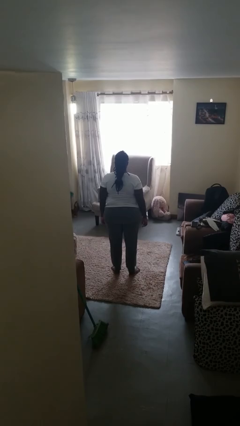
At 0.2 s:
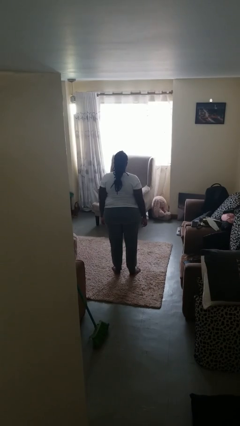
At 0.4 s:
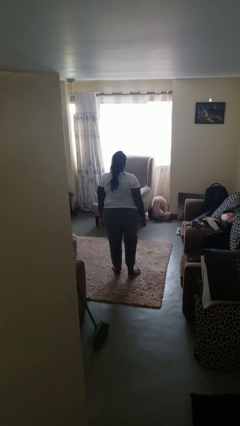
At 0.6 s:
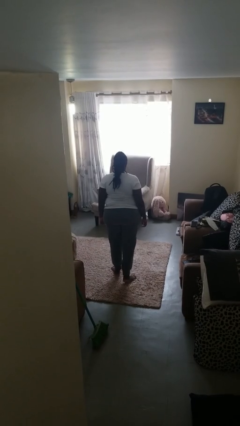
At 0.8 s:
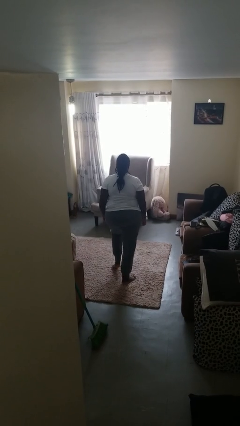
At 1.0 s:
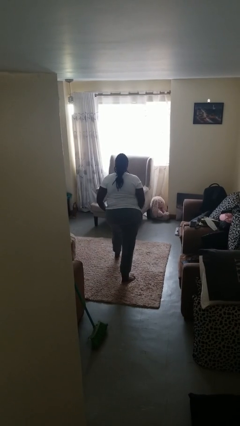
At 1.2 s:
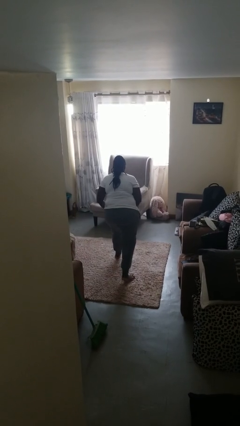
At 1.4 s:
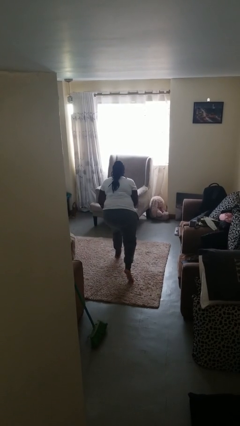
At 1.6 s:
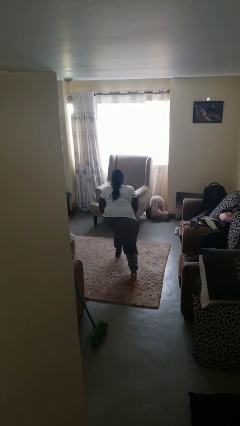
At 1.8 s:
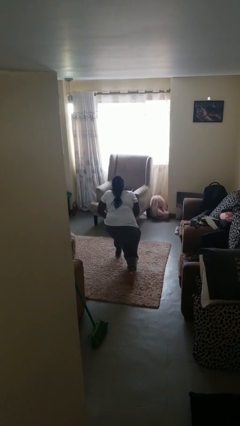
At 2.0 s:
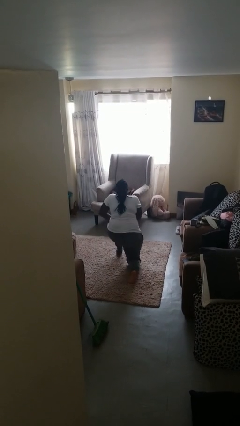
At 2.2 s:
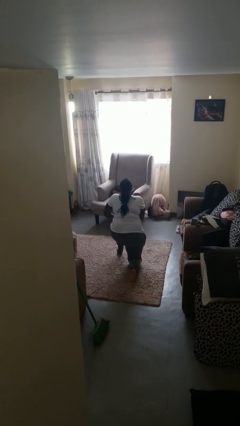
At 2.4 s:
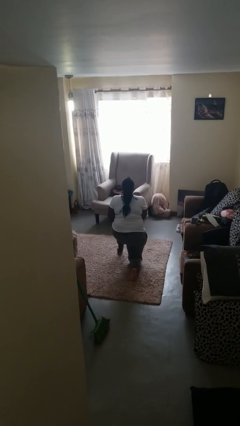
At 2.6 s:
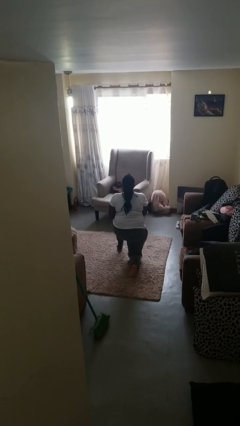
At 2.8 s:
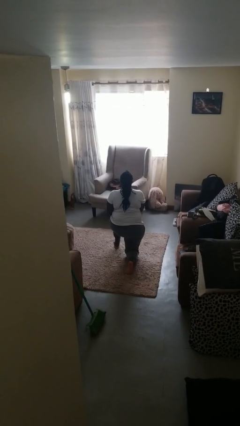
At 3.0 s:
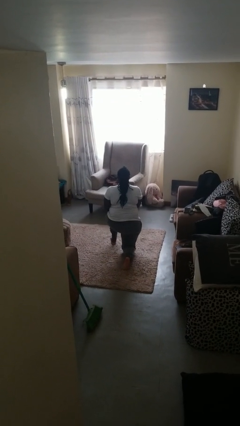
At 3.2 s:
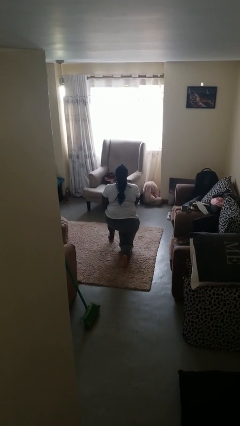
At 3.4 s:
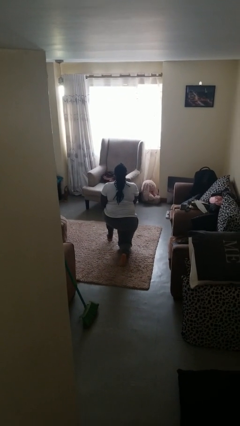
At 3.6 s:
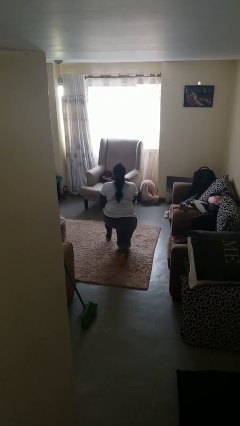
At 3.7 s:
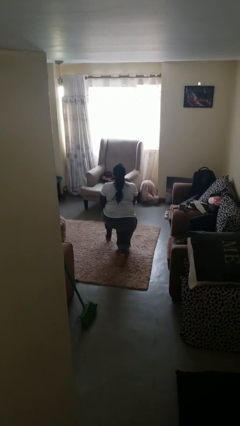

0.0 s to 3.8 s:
person kneels

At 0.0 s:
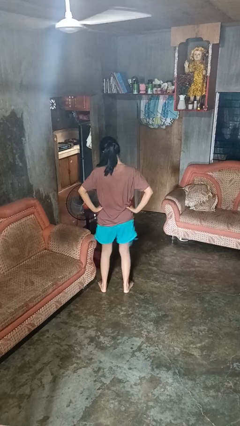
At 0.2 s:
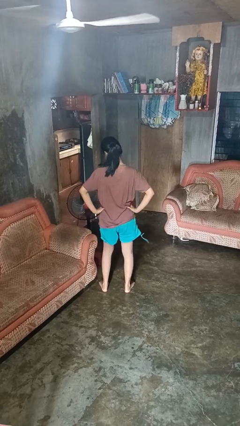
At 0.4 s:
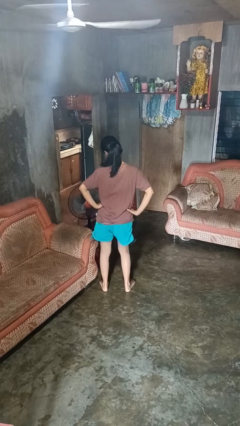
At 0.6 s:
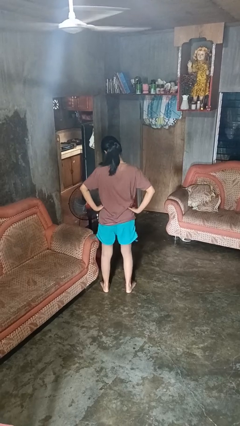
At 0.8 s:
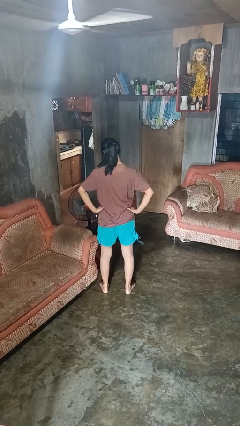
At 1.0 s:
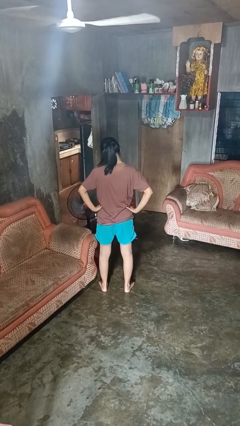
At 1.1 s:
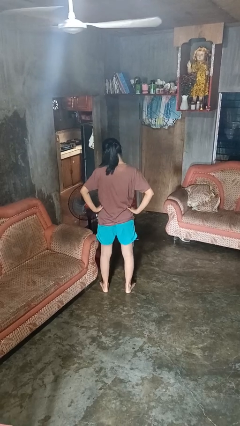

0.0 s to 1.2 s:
person wiggles hips

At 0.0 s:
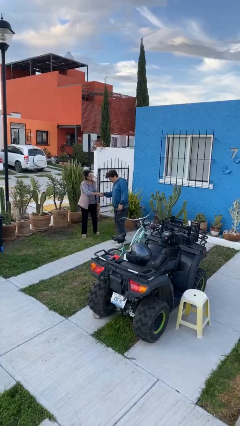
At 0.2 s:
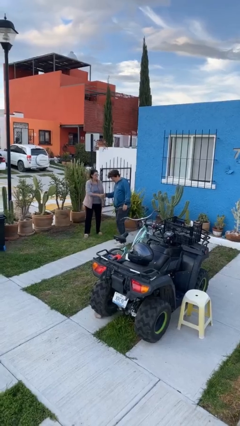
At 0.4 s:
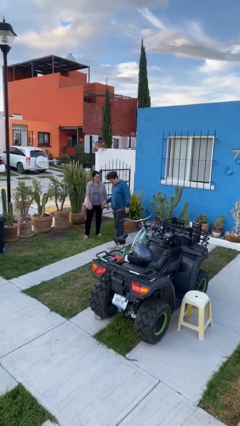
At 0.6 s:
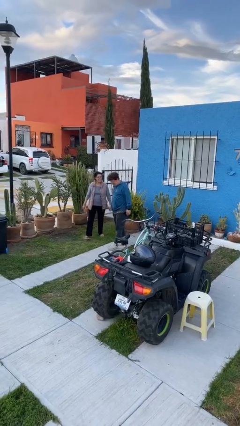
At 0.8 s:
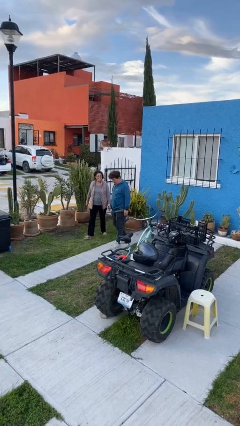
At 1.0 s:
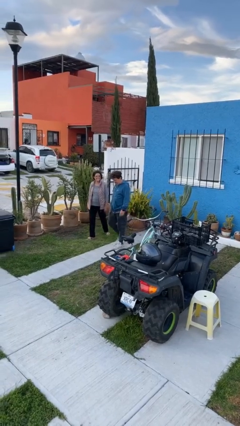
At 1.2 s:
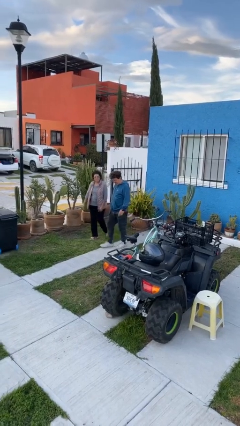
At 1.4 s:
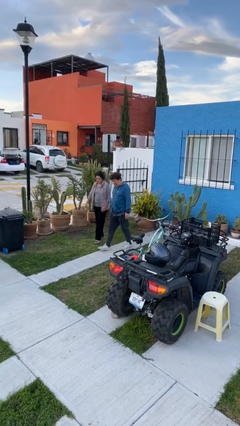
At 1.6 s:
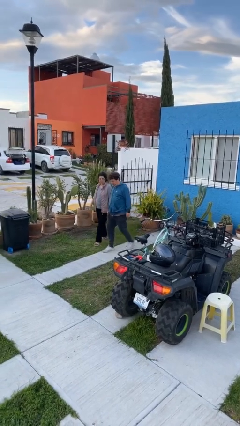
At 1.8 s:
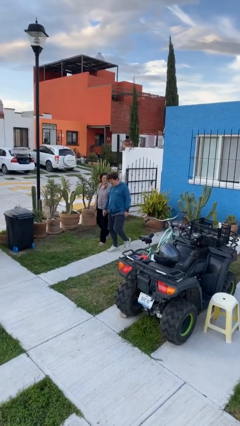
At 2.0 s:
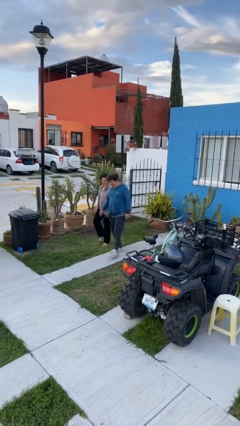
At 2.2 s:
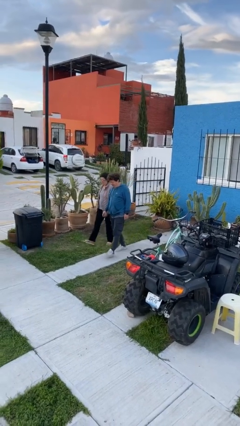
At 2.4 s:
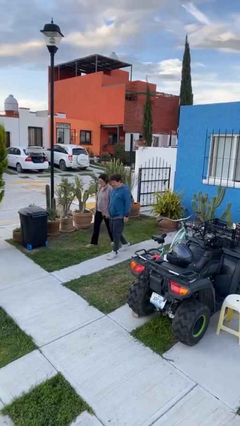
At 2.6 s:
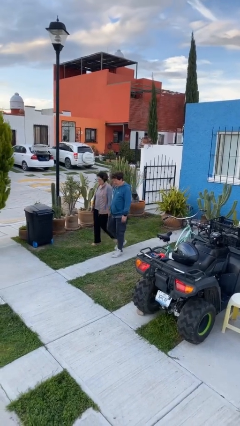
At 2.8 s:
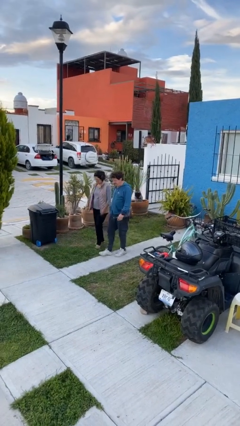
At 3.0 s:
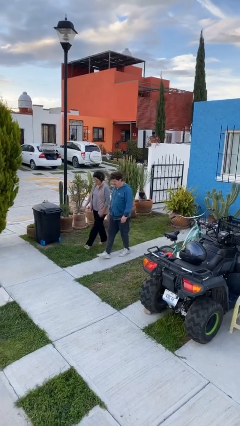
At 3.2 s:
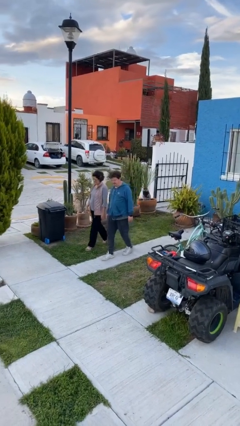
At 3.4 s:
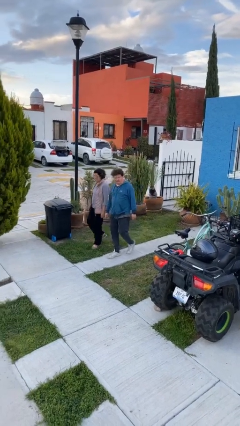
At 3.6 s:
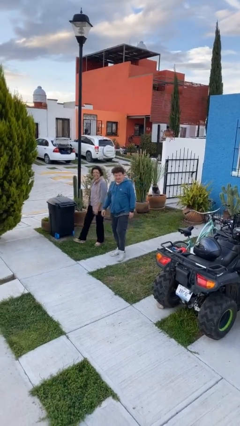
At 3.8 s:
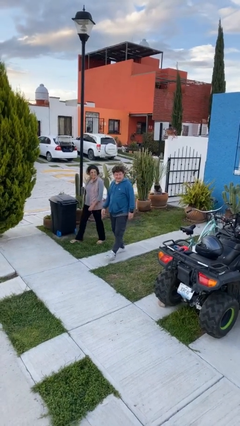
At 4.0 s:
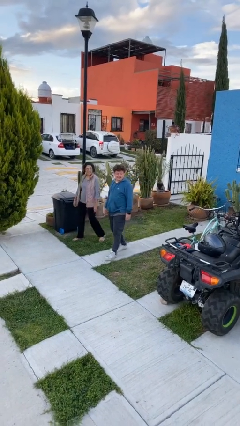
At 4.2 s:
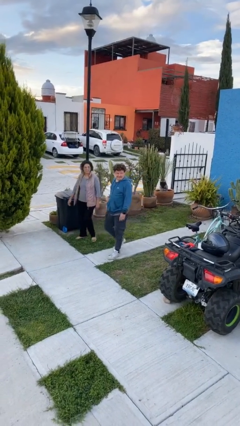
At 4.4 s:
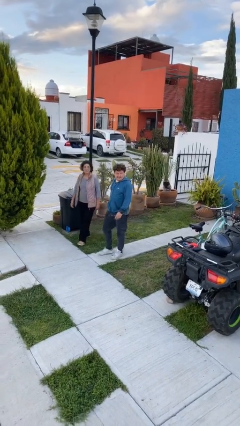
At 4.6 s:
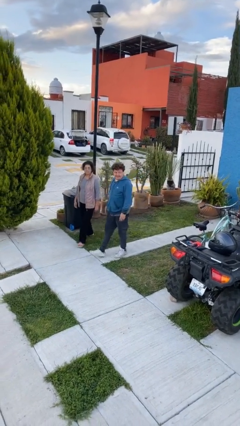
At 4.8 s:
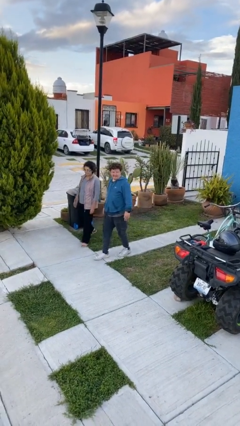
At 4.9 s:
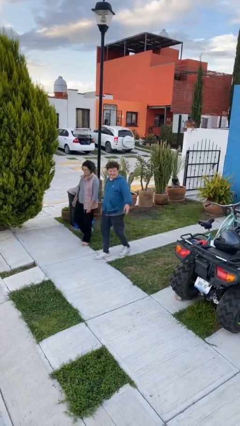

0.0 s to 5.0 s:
person talks to person

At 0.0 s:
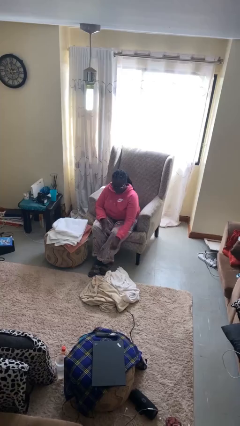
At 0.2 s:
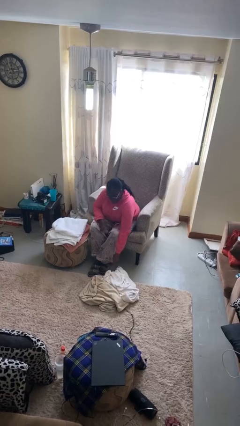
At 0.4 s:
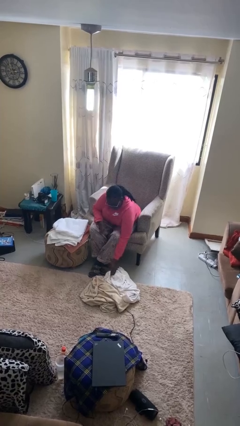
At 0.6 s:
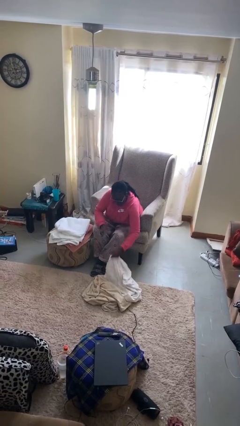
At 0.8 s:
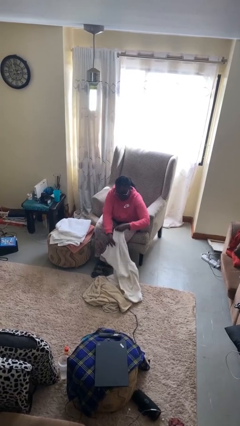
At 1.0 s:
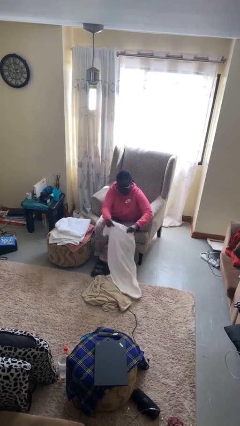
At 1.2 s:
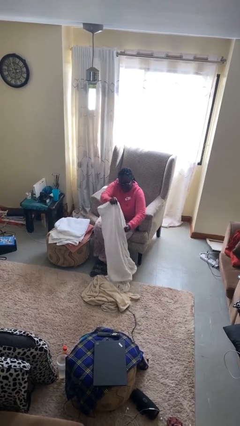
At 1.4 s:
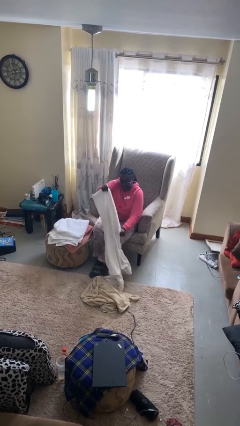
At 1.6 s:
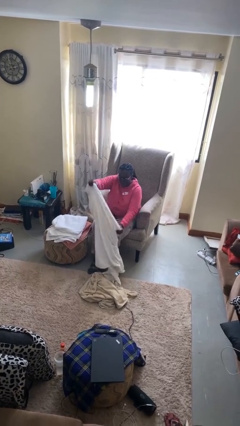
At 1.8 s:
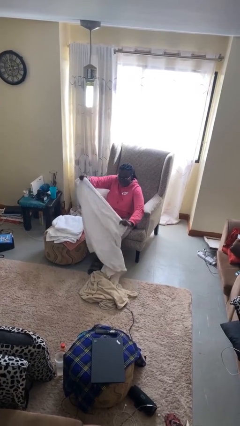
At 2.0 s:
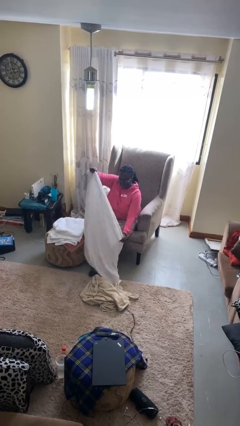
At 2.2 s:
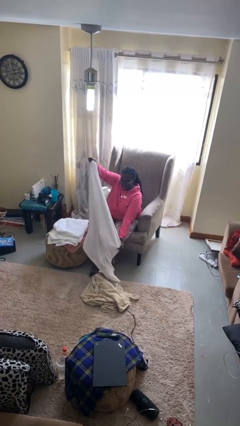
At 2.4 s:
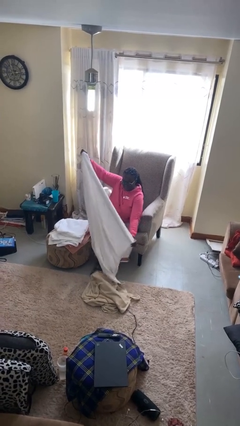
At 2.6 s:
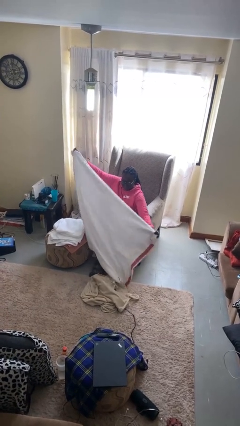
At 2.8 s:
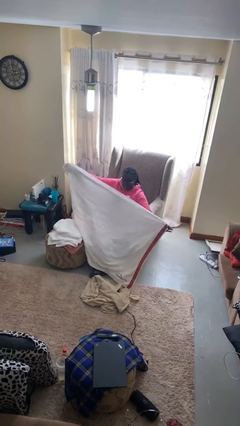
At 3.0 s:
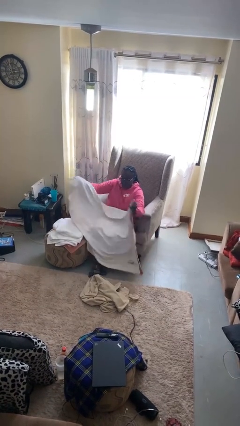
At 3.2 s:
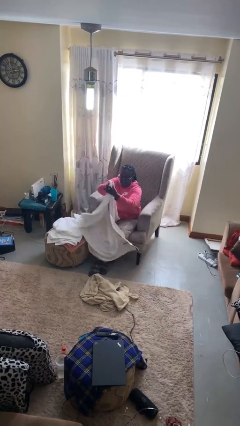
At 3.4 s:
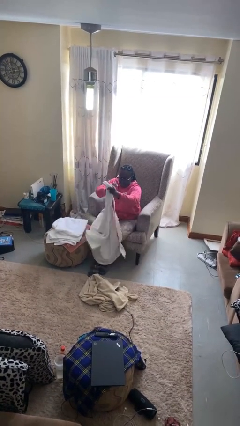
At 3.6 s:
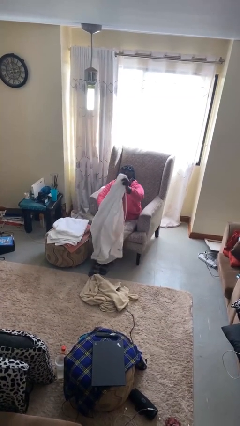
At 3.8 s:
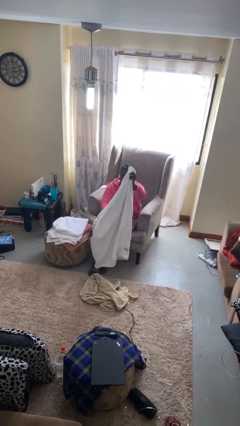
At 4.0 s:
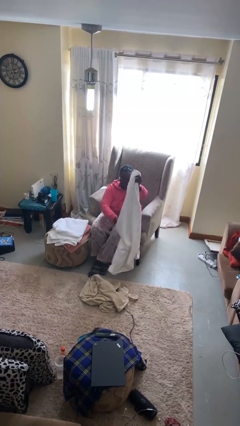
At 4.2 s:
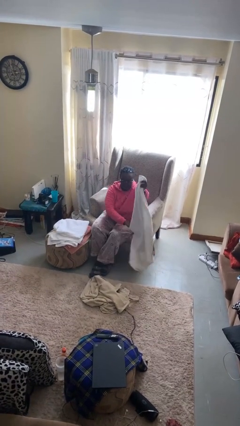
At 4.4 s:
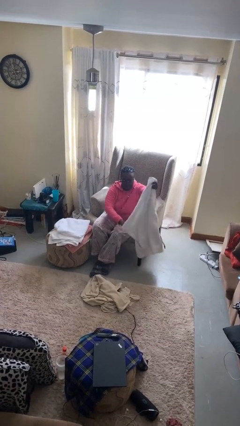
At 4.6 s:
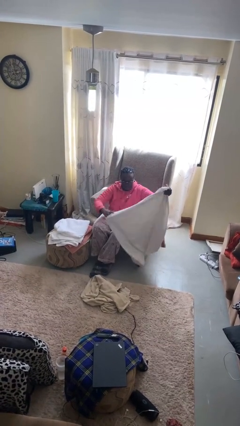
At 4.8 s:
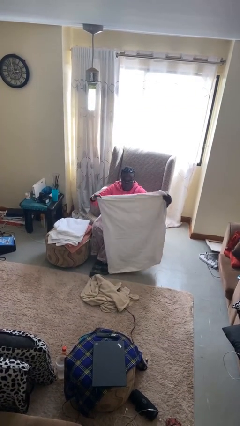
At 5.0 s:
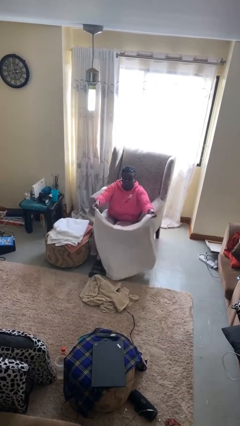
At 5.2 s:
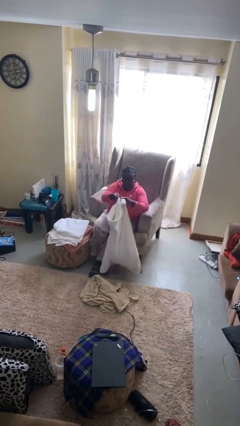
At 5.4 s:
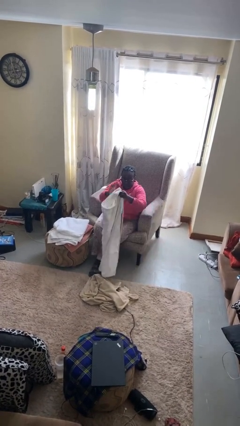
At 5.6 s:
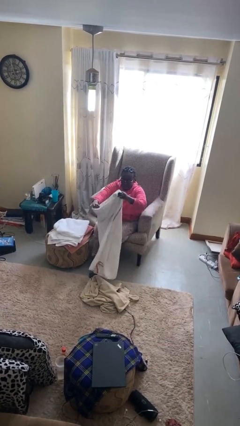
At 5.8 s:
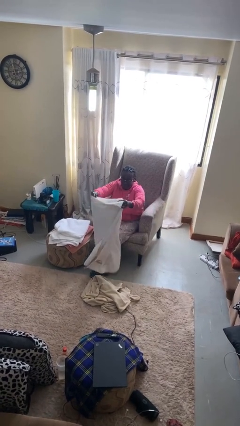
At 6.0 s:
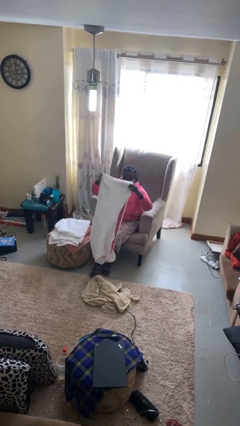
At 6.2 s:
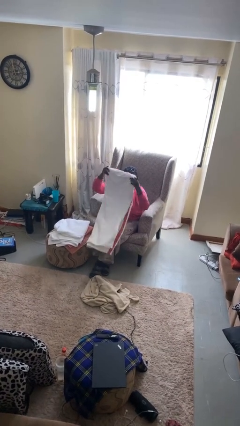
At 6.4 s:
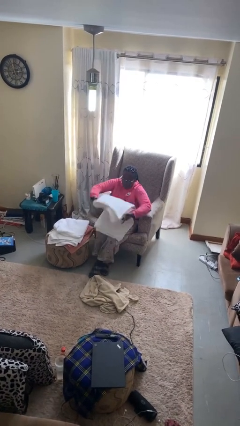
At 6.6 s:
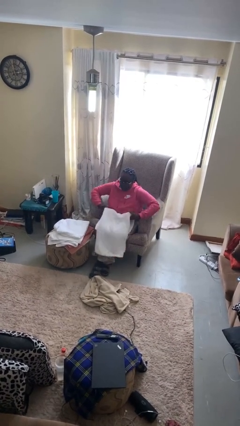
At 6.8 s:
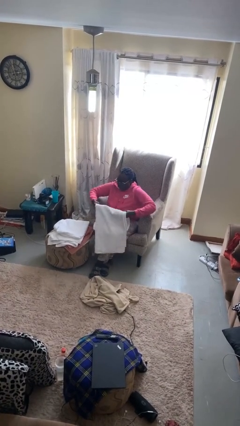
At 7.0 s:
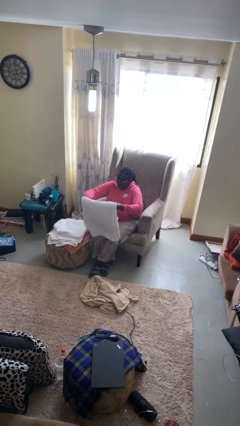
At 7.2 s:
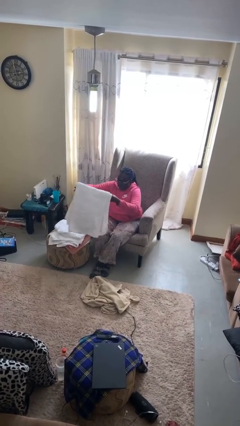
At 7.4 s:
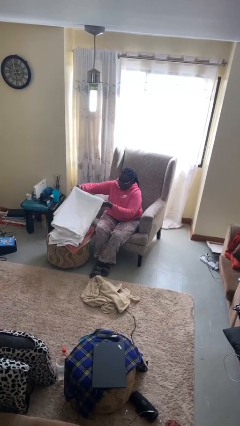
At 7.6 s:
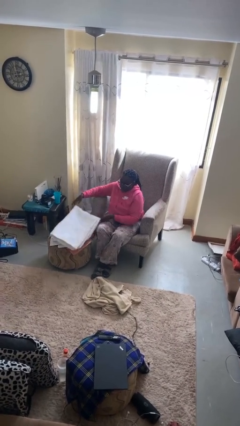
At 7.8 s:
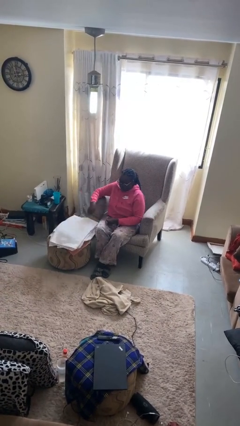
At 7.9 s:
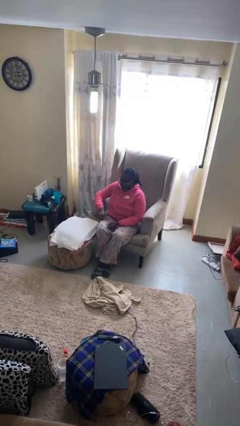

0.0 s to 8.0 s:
person folds towel
